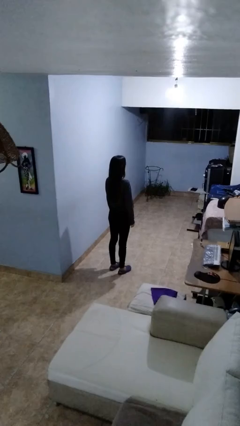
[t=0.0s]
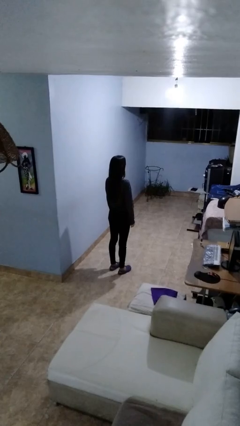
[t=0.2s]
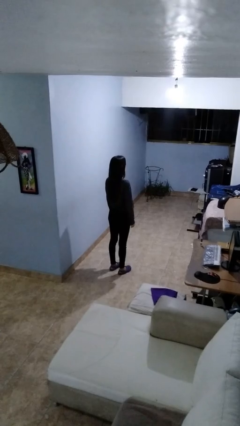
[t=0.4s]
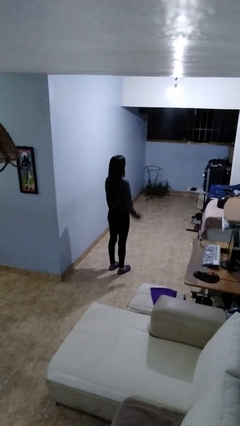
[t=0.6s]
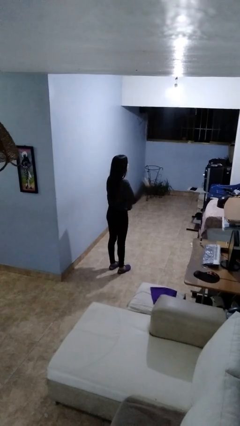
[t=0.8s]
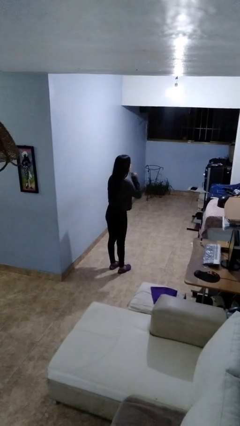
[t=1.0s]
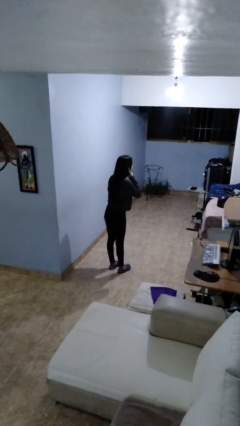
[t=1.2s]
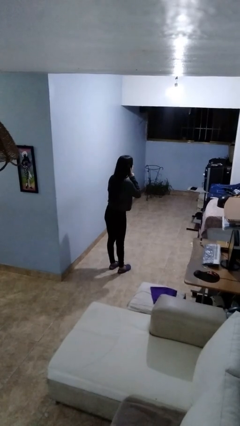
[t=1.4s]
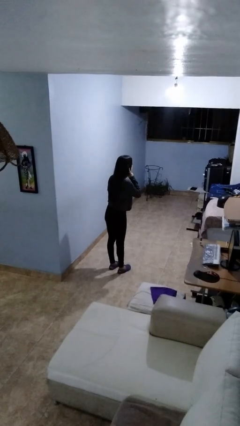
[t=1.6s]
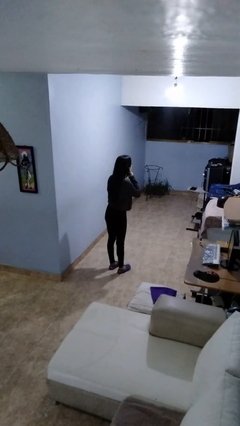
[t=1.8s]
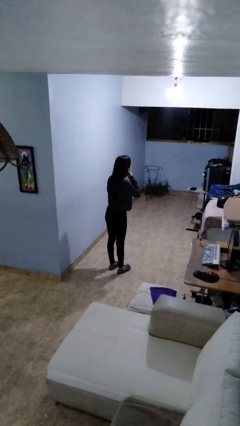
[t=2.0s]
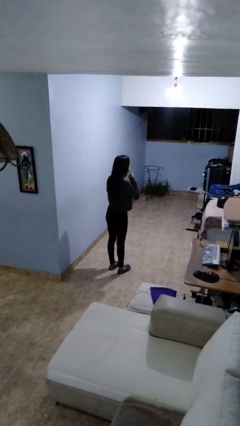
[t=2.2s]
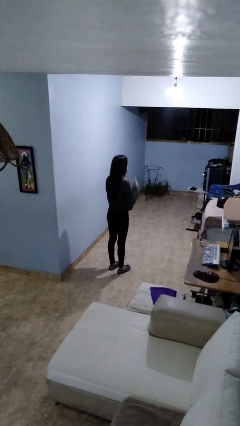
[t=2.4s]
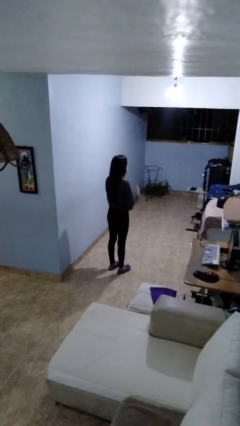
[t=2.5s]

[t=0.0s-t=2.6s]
person gestures listen closely

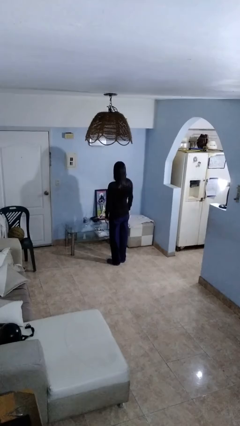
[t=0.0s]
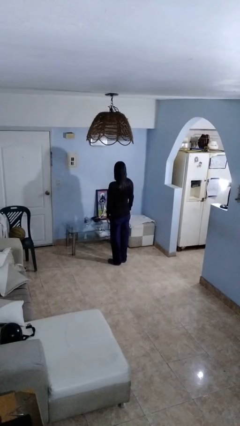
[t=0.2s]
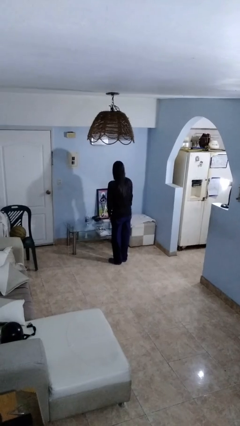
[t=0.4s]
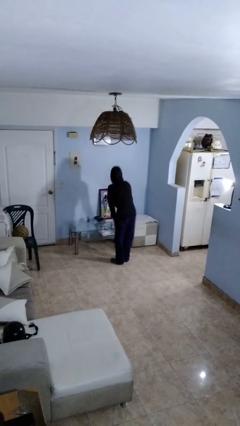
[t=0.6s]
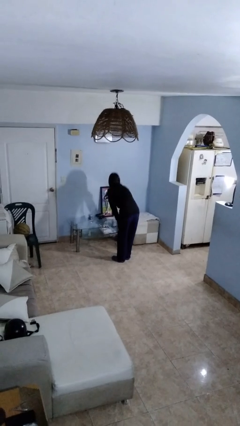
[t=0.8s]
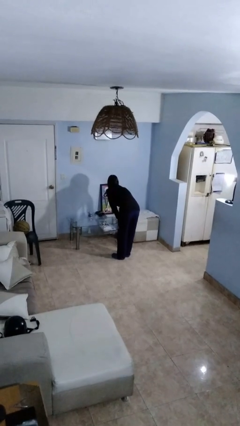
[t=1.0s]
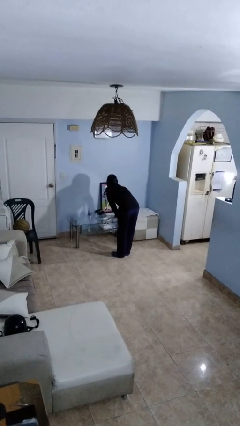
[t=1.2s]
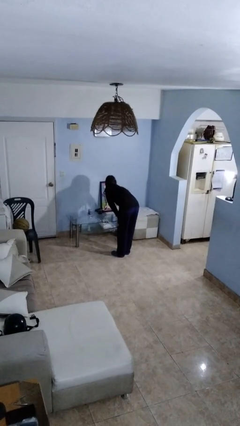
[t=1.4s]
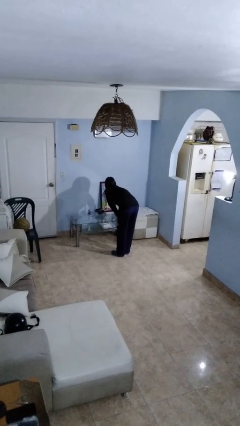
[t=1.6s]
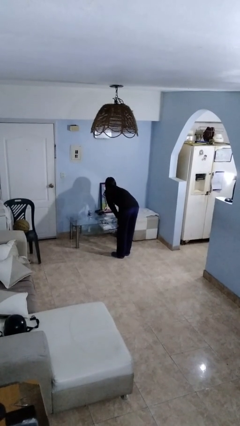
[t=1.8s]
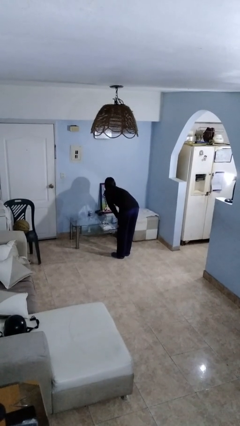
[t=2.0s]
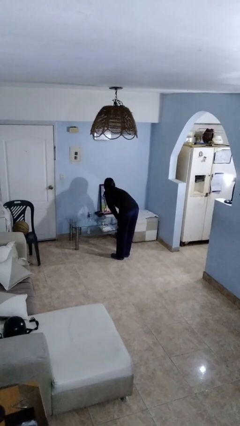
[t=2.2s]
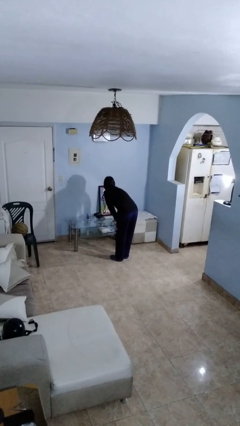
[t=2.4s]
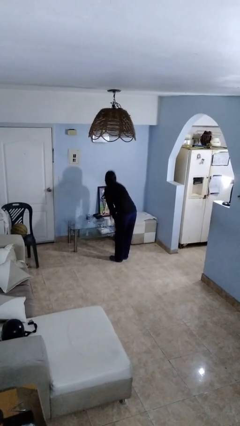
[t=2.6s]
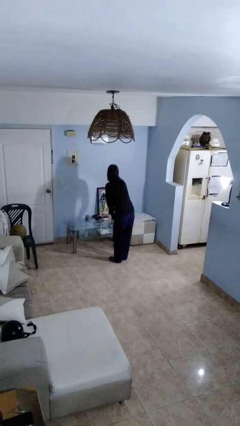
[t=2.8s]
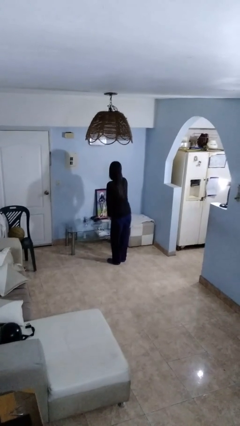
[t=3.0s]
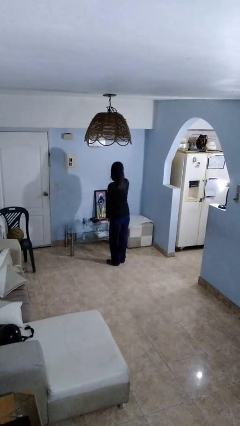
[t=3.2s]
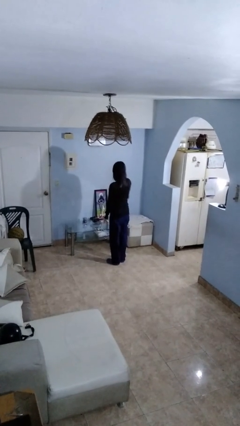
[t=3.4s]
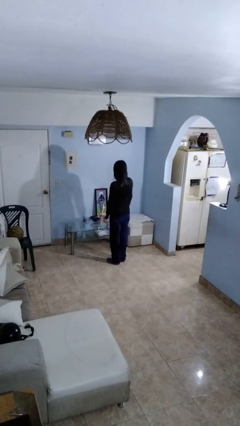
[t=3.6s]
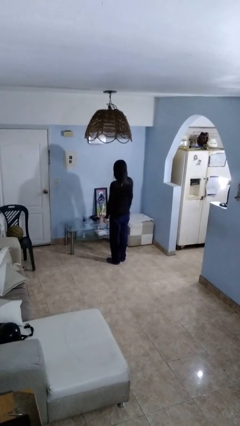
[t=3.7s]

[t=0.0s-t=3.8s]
person cleans table with rag

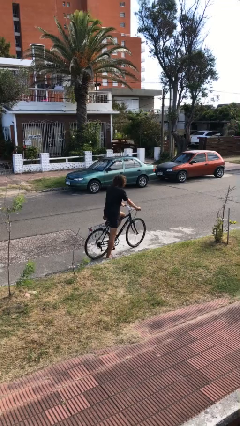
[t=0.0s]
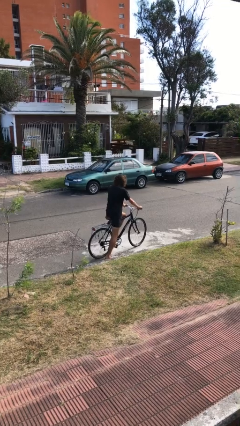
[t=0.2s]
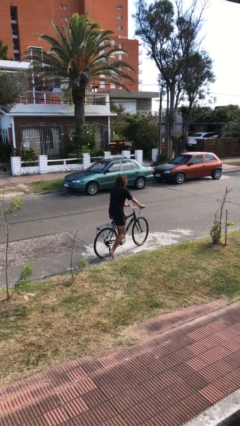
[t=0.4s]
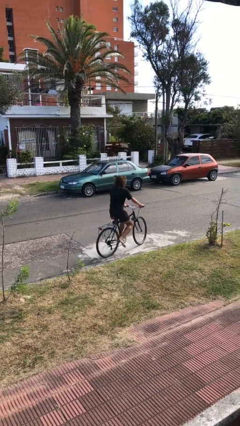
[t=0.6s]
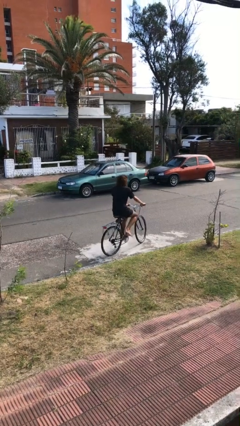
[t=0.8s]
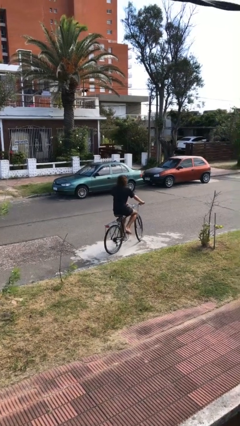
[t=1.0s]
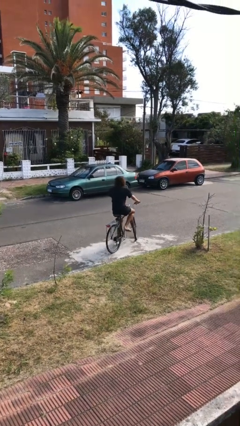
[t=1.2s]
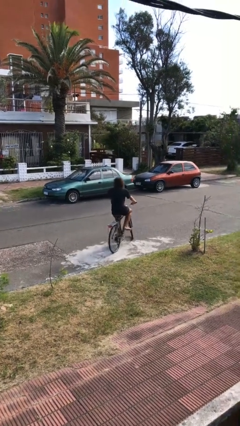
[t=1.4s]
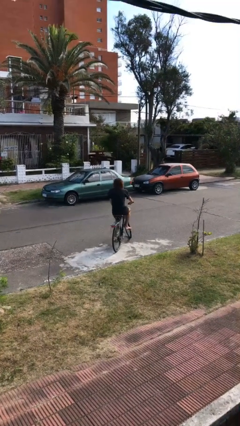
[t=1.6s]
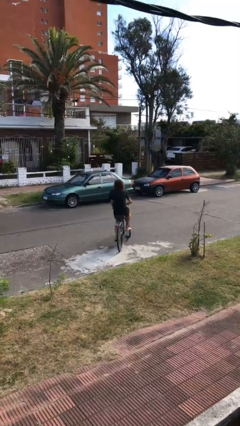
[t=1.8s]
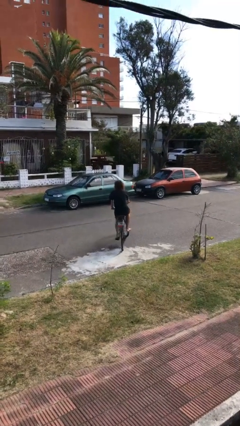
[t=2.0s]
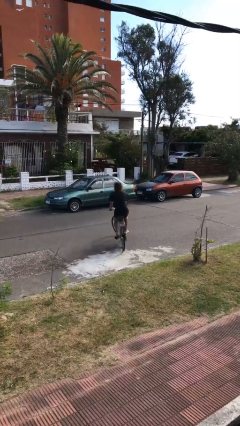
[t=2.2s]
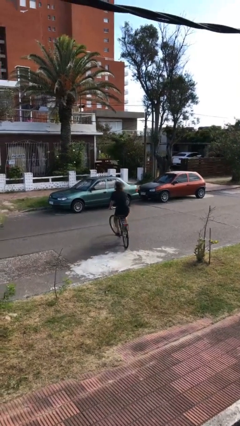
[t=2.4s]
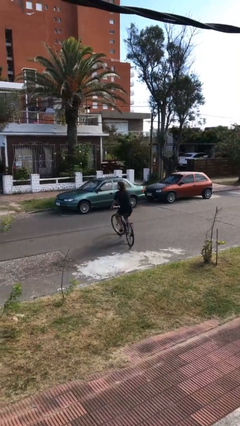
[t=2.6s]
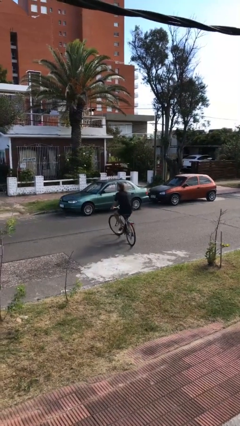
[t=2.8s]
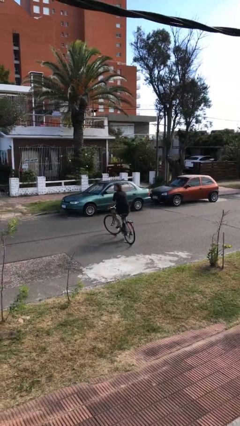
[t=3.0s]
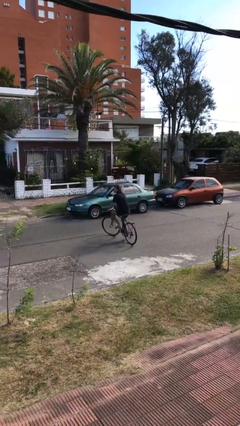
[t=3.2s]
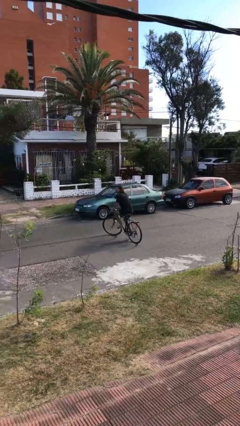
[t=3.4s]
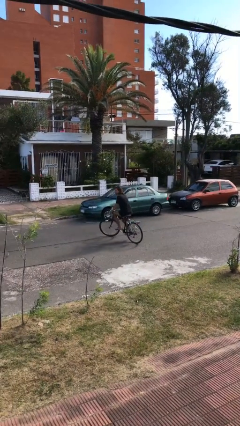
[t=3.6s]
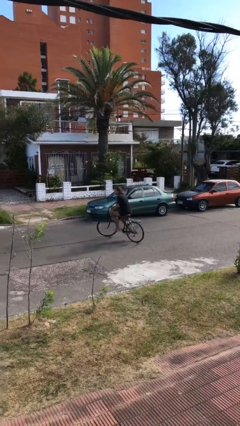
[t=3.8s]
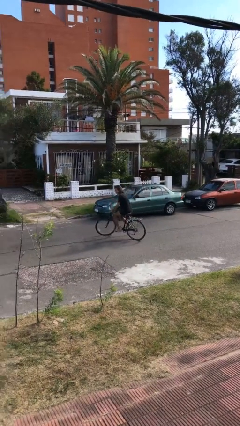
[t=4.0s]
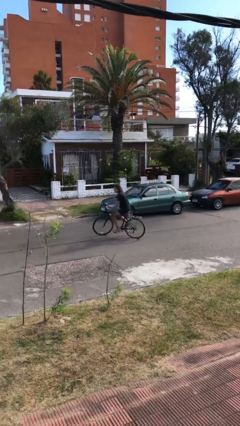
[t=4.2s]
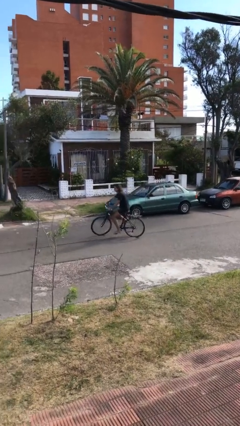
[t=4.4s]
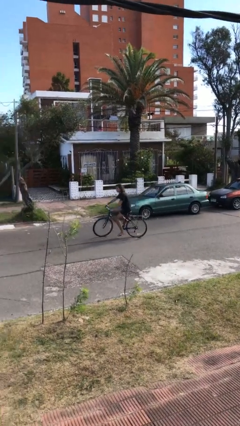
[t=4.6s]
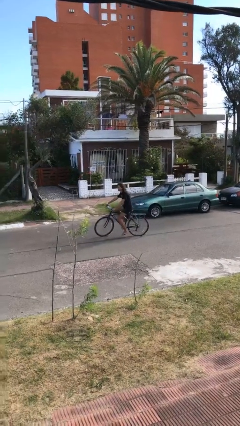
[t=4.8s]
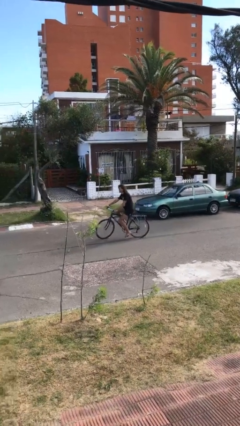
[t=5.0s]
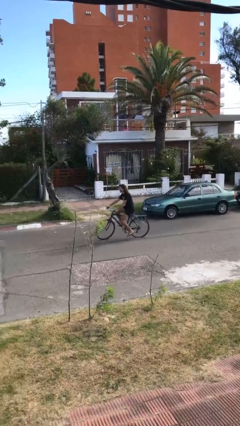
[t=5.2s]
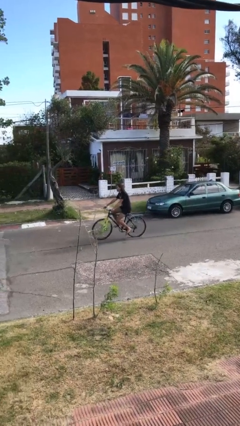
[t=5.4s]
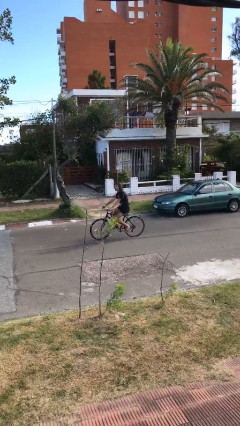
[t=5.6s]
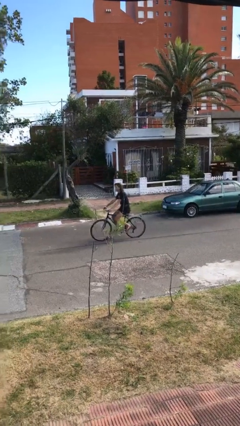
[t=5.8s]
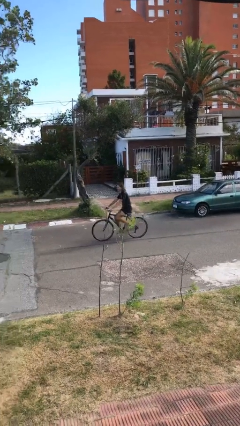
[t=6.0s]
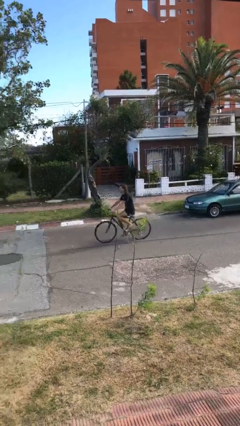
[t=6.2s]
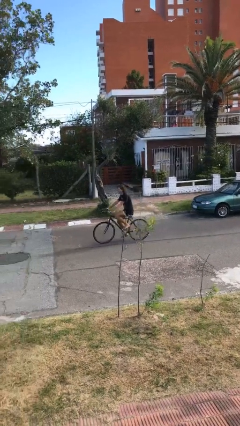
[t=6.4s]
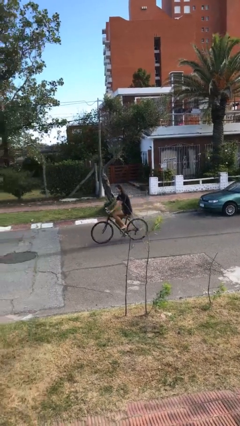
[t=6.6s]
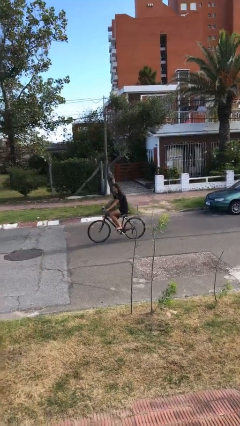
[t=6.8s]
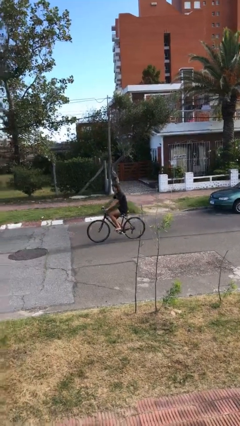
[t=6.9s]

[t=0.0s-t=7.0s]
person rides bicycle

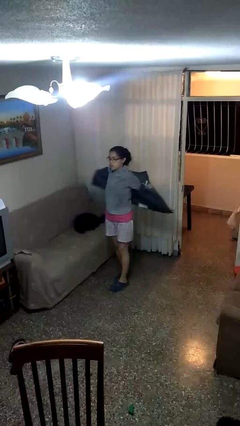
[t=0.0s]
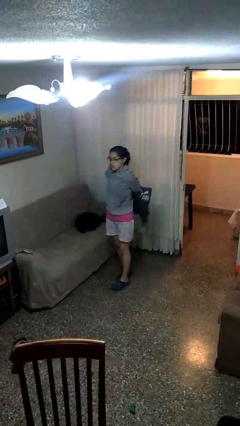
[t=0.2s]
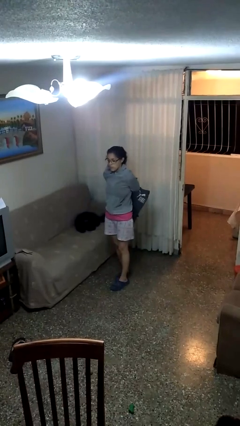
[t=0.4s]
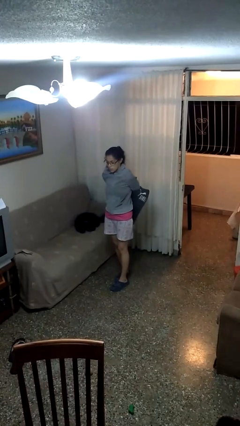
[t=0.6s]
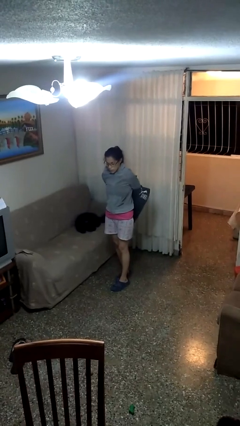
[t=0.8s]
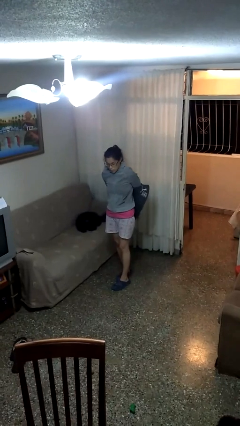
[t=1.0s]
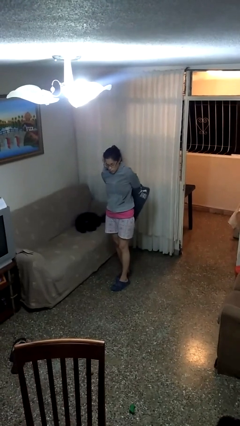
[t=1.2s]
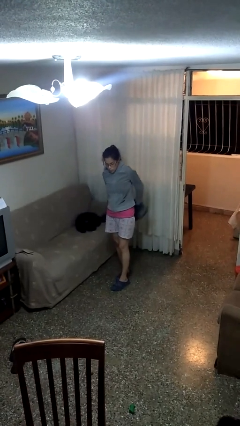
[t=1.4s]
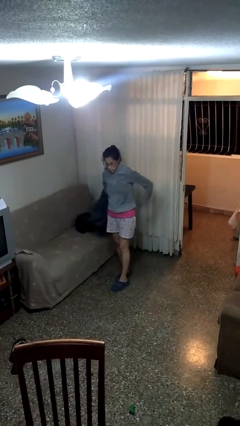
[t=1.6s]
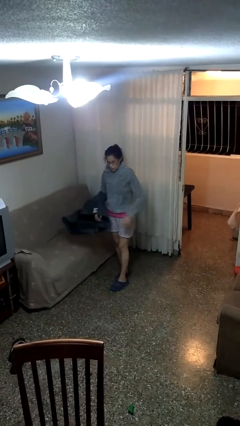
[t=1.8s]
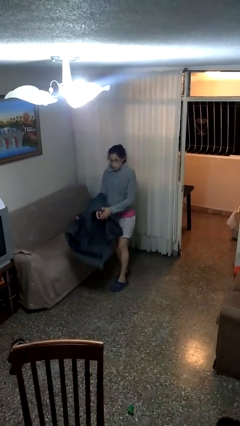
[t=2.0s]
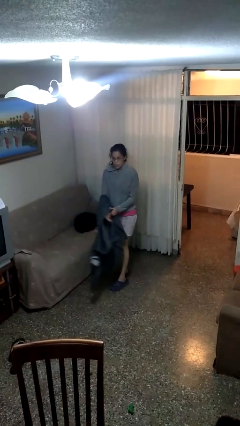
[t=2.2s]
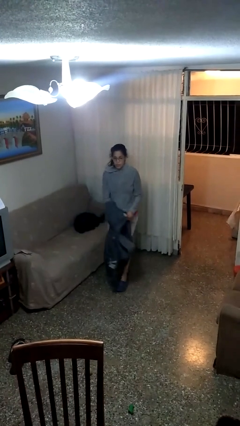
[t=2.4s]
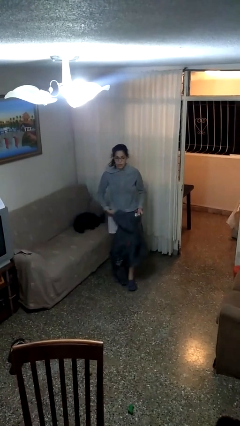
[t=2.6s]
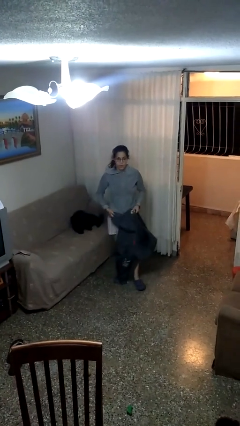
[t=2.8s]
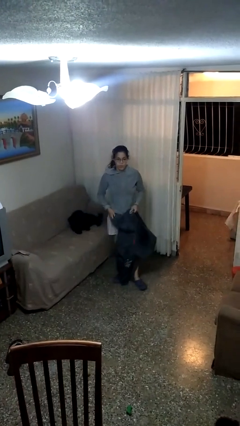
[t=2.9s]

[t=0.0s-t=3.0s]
person takes off jacket

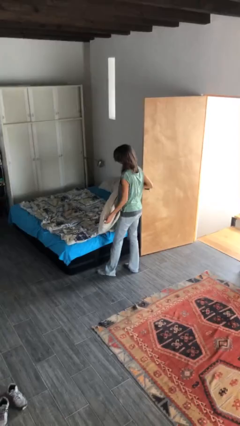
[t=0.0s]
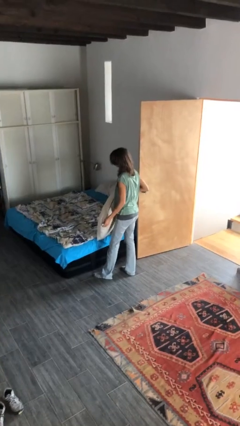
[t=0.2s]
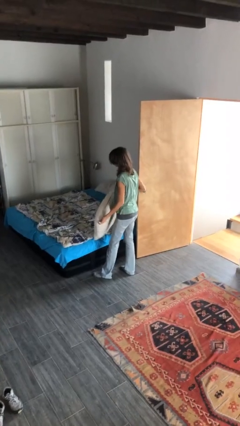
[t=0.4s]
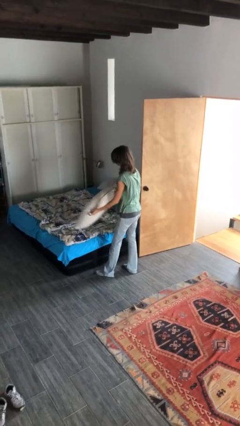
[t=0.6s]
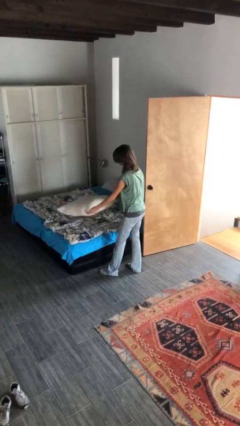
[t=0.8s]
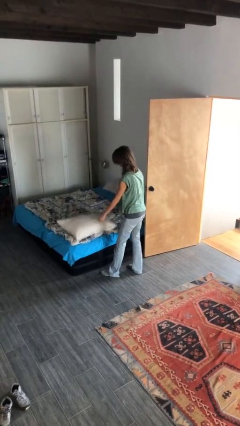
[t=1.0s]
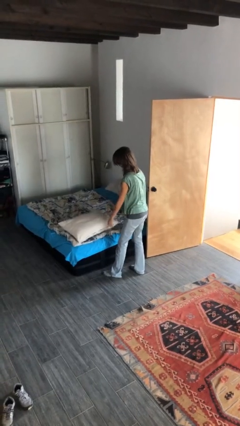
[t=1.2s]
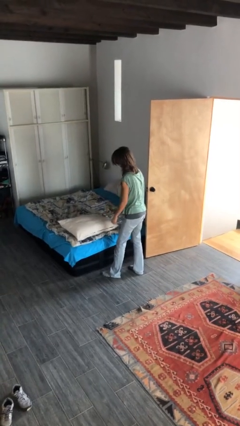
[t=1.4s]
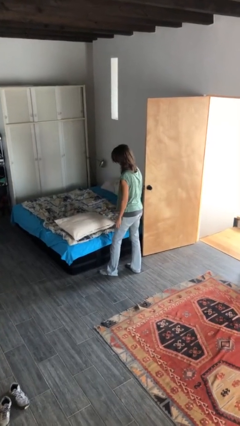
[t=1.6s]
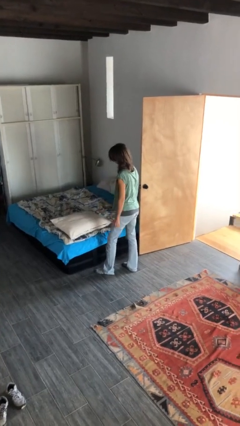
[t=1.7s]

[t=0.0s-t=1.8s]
person puts down object on bed
